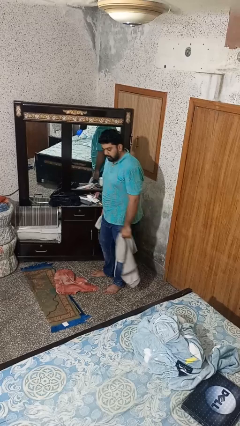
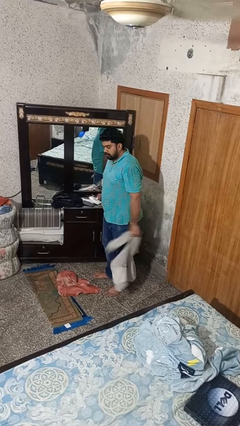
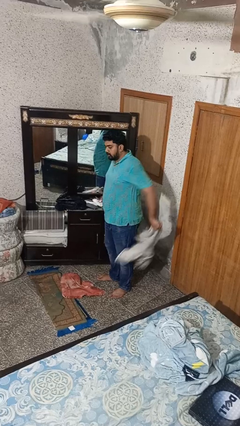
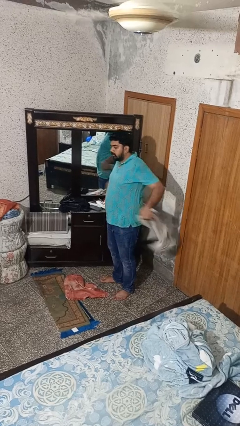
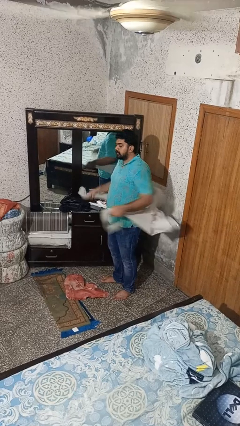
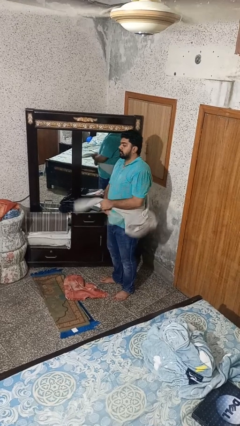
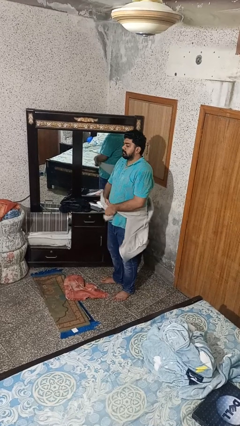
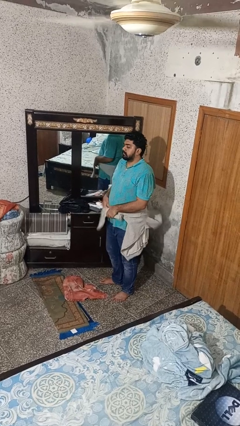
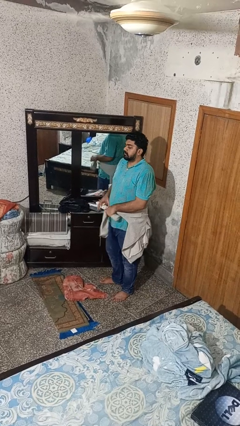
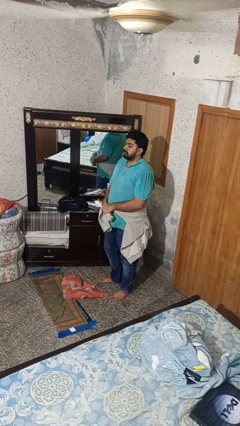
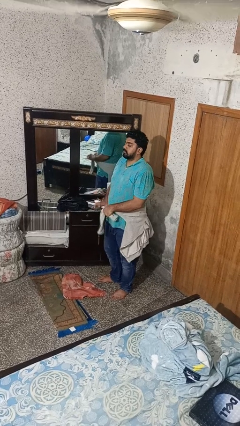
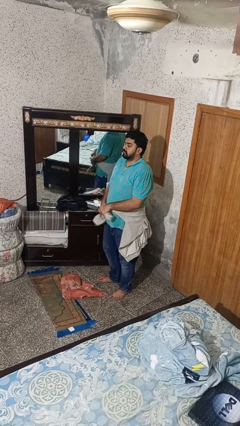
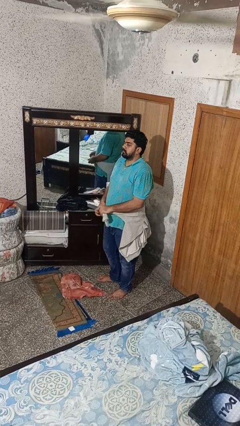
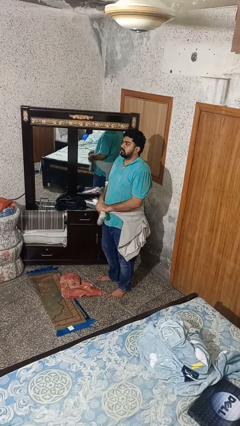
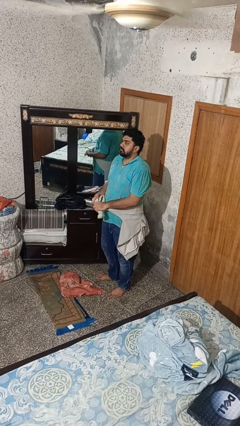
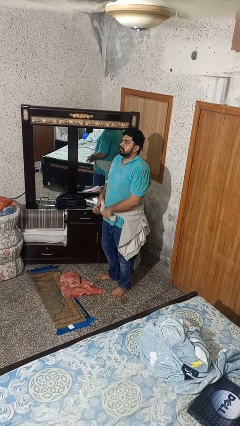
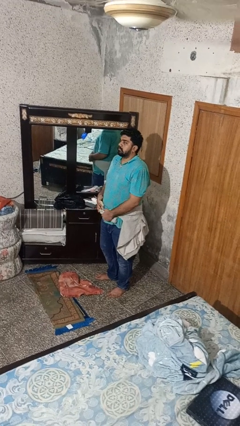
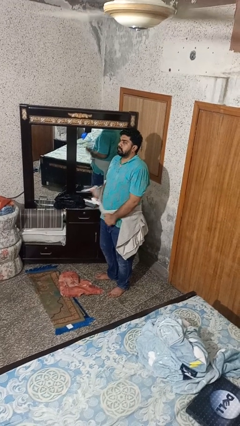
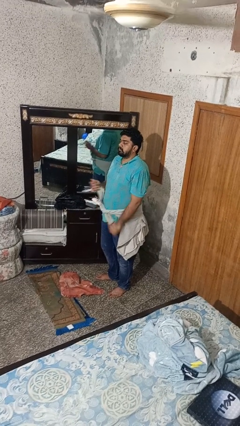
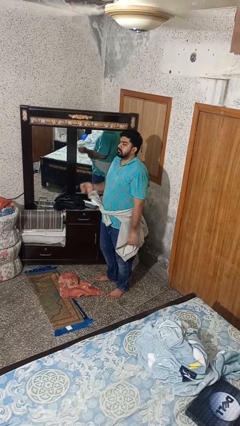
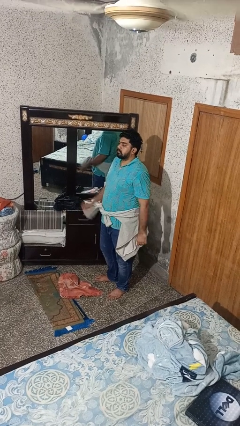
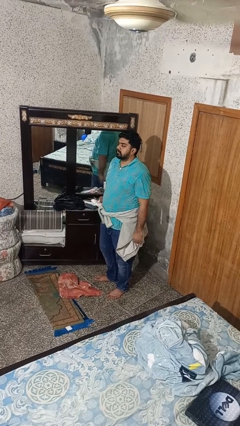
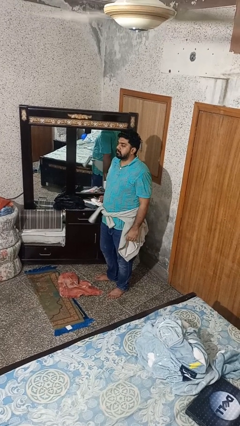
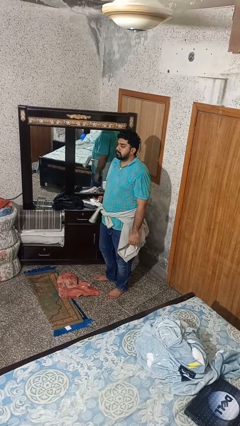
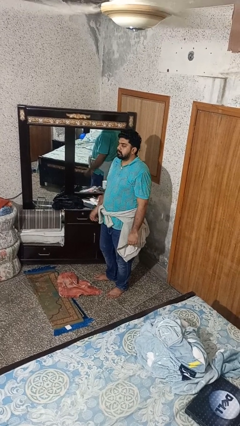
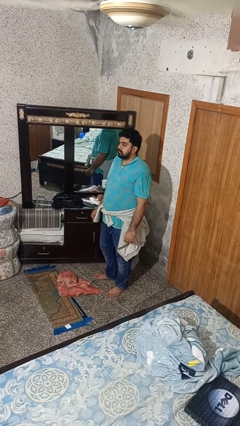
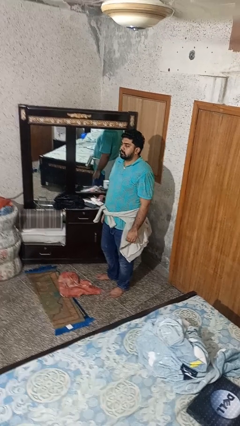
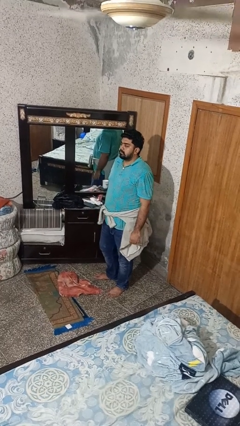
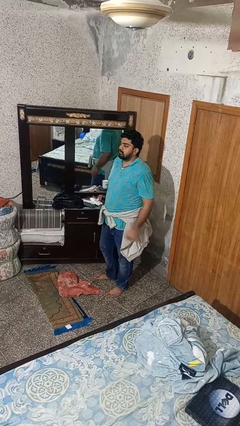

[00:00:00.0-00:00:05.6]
person ties jacket around waist

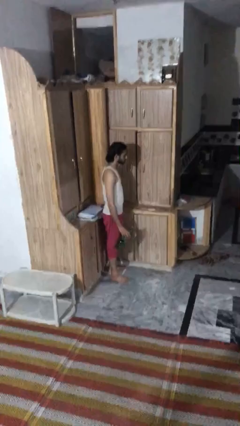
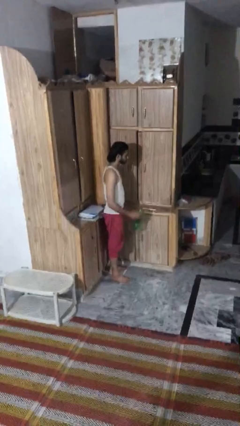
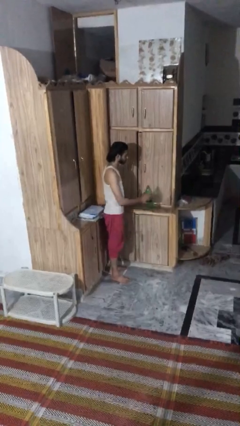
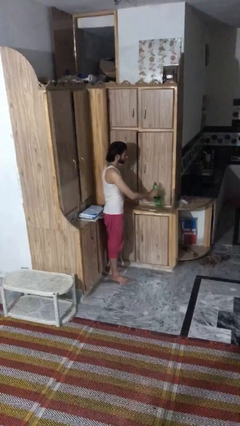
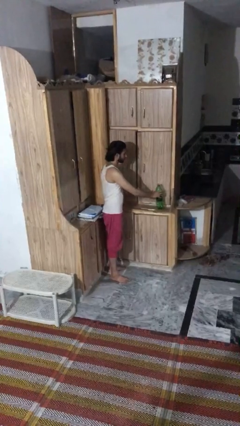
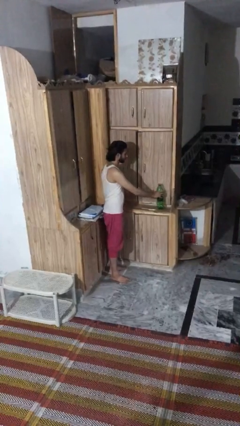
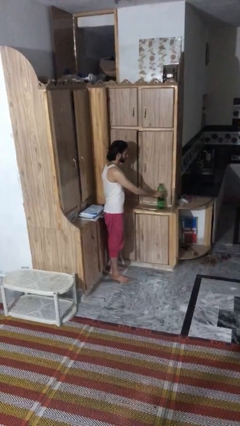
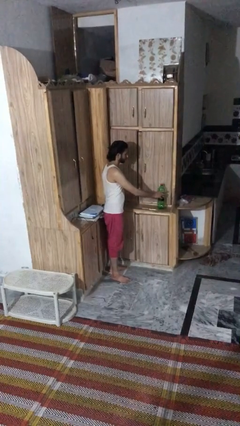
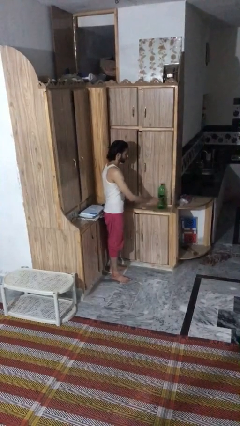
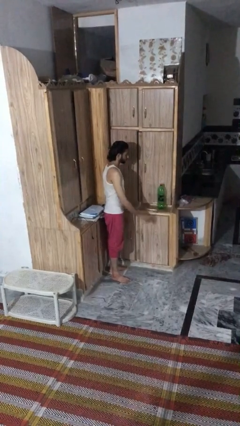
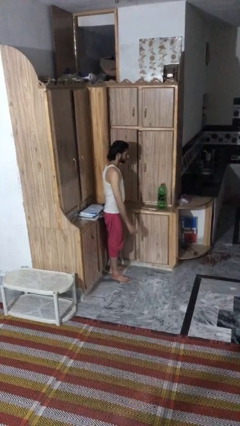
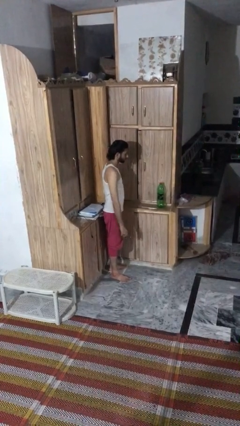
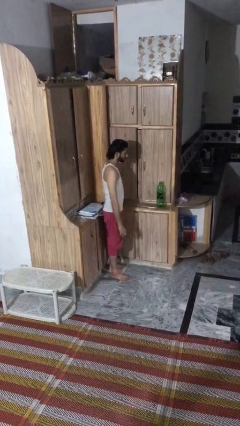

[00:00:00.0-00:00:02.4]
person puts down object on countertop

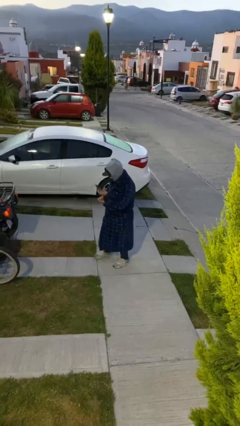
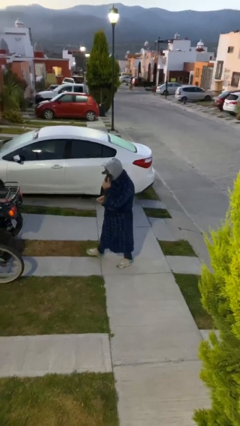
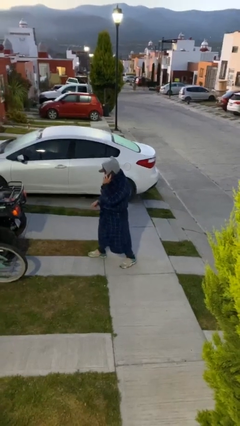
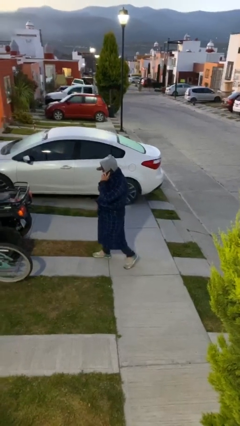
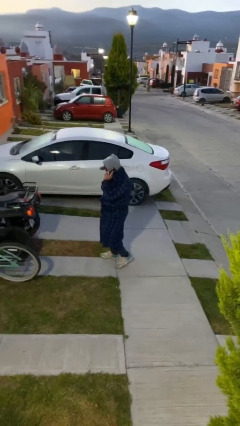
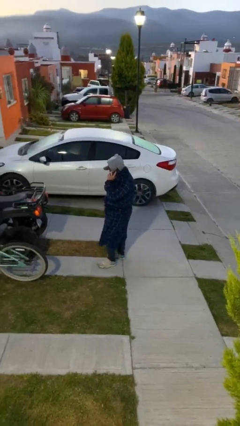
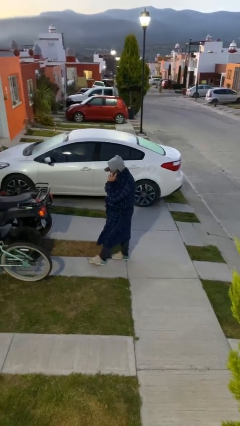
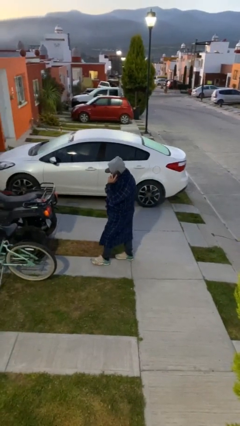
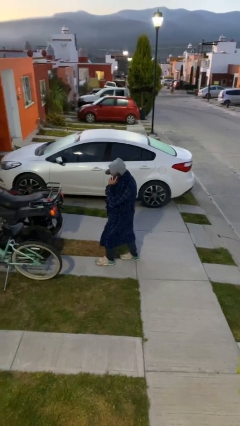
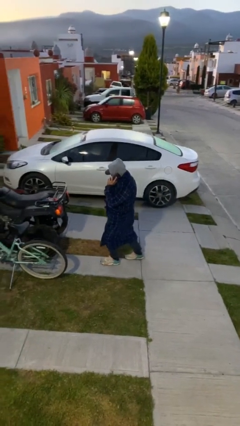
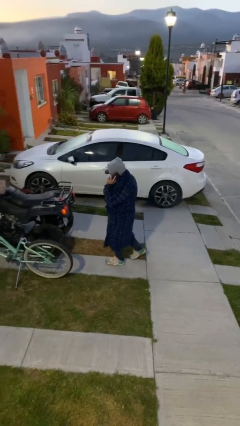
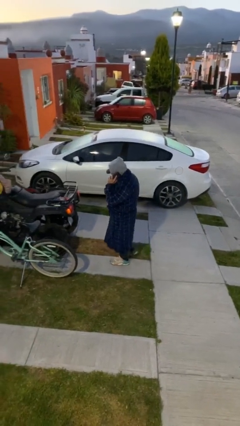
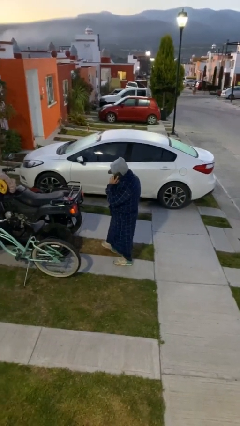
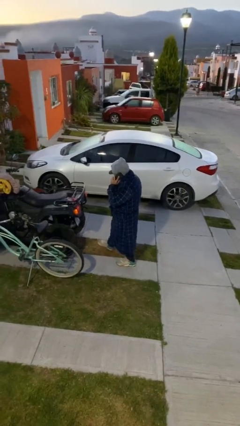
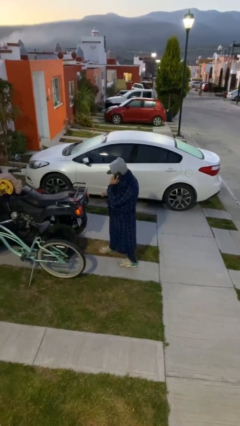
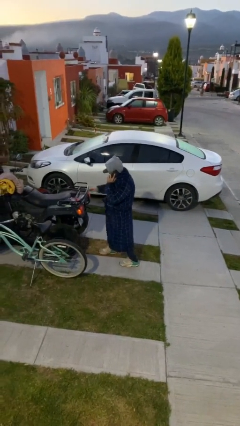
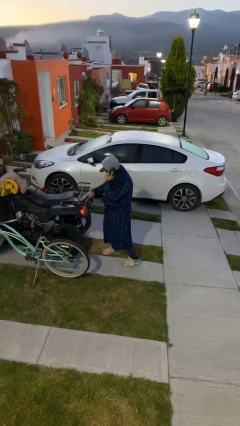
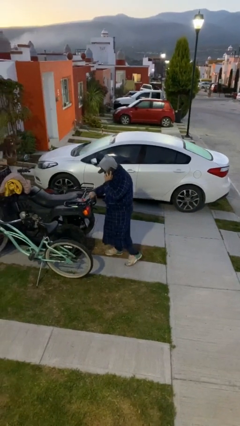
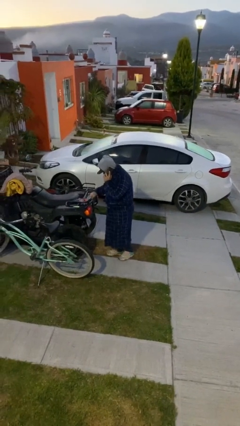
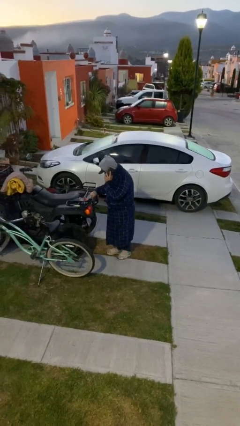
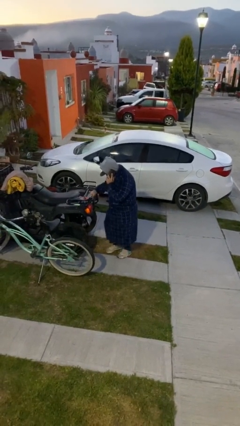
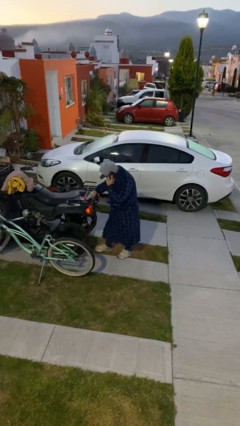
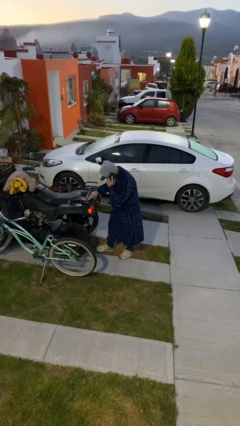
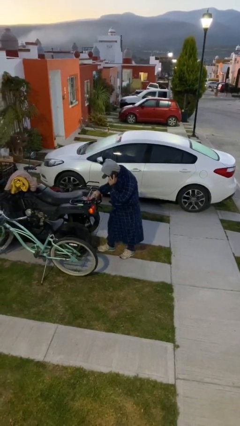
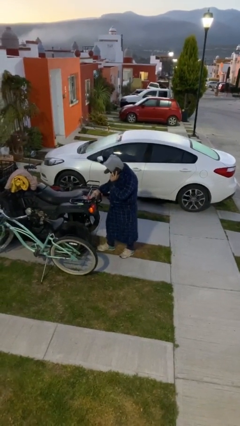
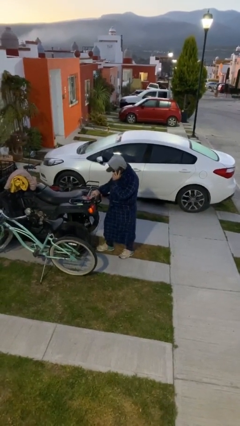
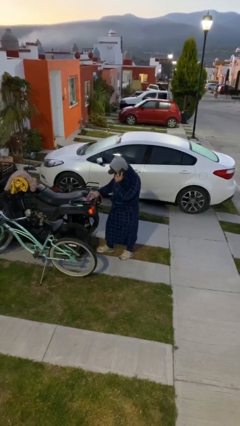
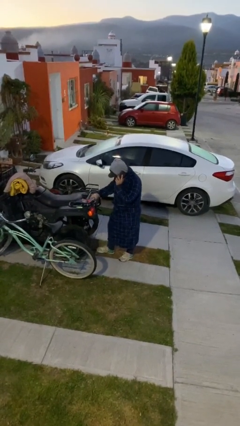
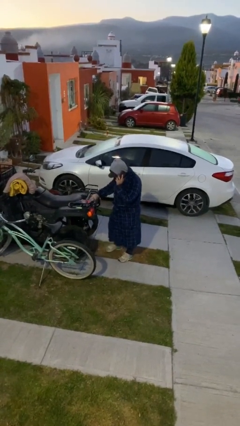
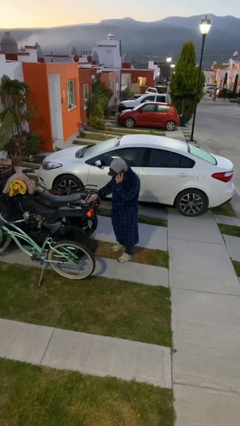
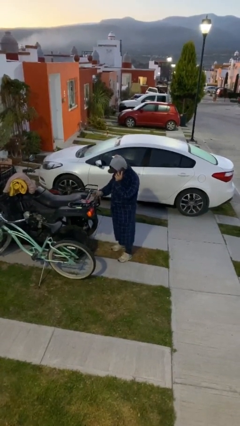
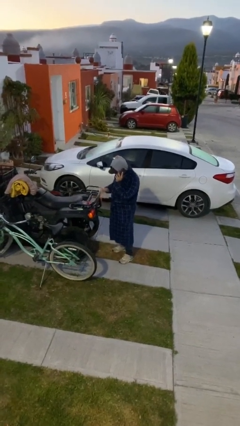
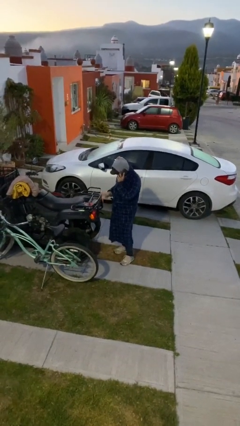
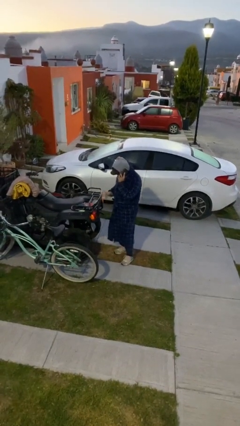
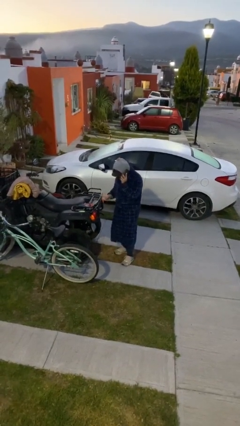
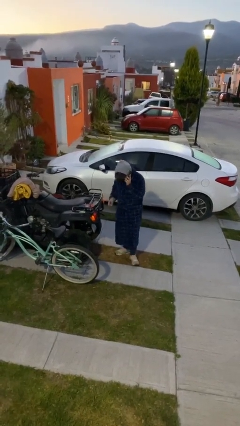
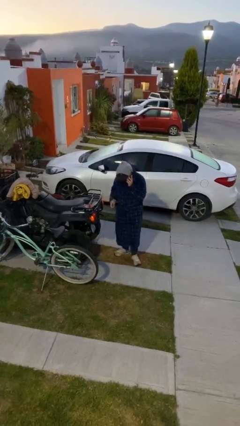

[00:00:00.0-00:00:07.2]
person talks on phone

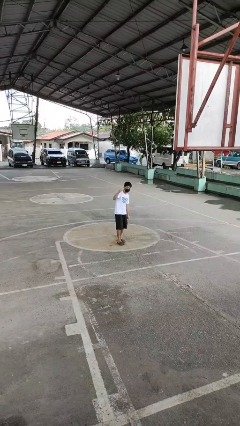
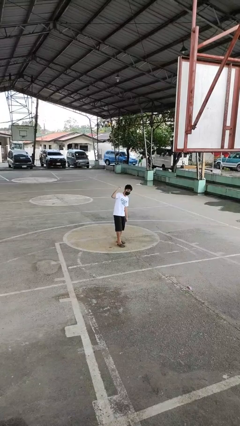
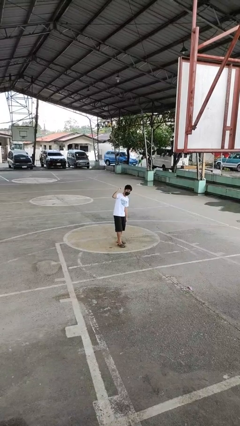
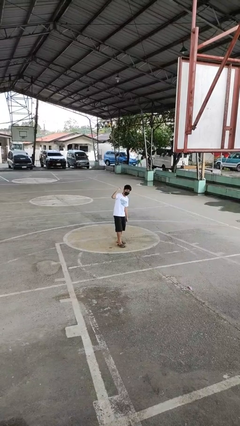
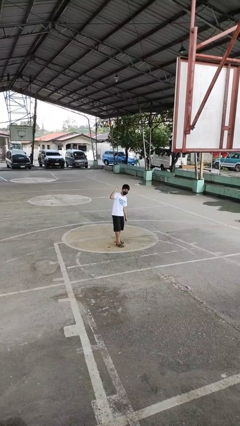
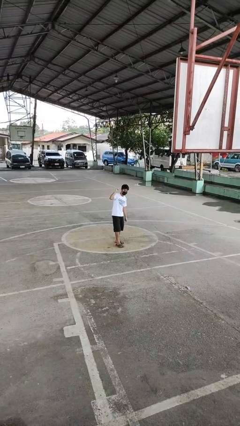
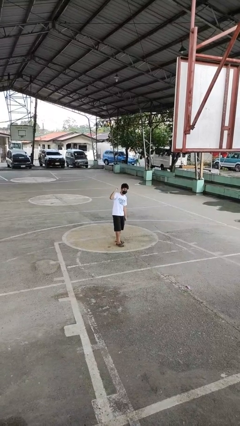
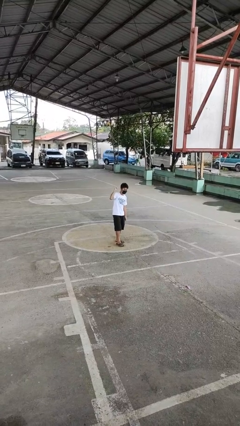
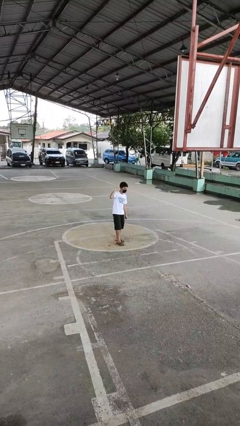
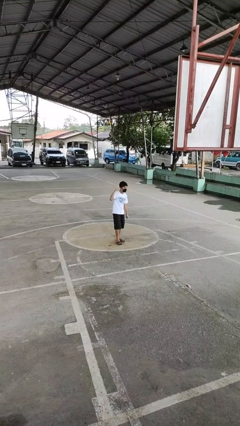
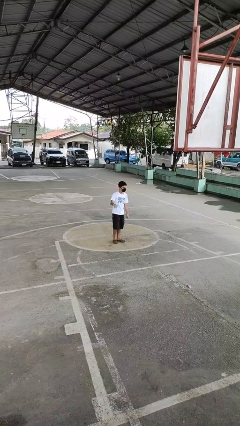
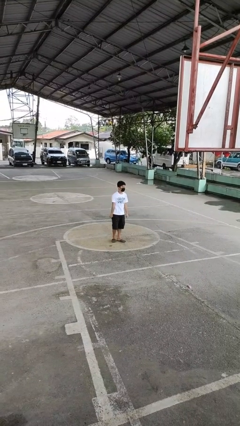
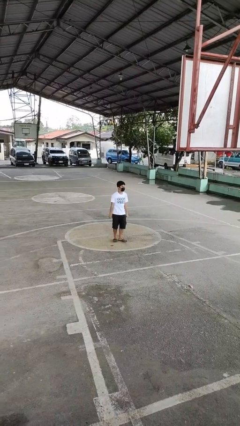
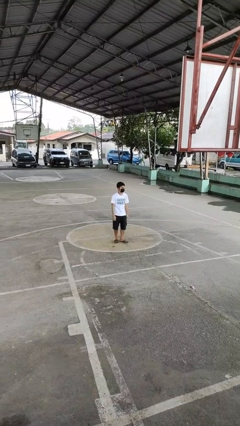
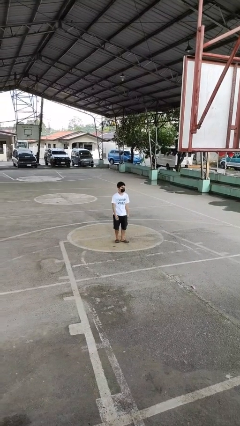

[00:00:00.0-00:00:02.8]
person gestures behind me
